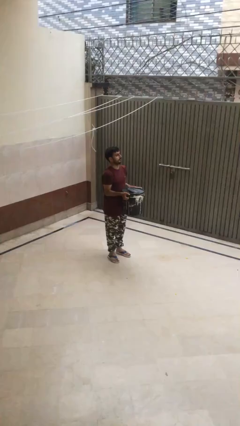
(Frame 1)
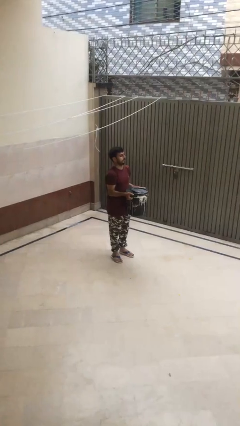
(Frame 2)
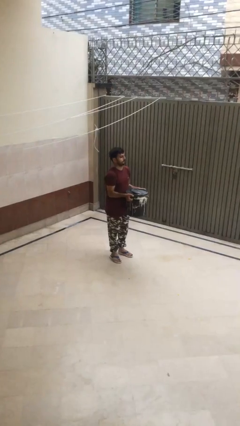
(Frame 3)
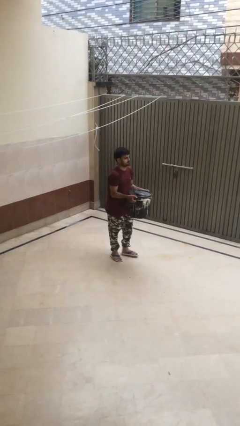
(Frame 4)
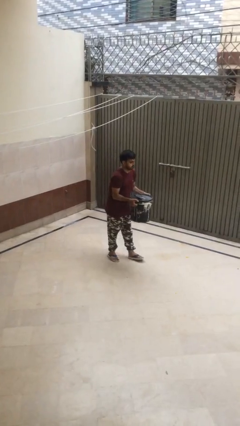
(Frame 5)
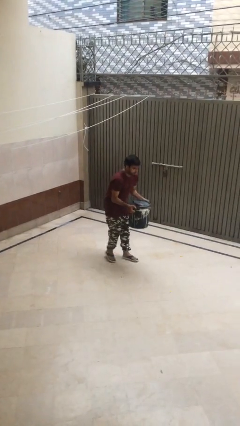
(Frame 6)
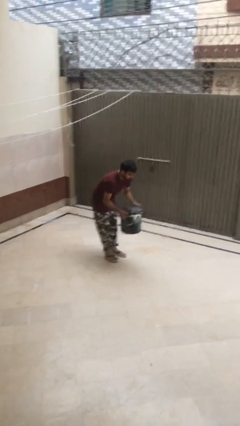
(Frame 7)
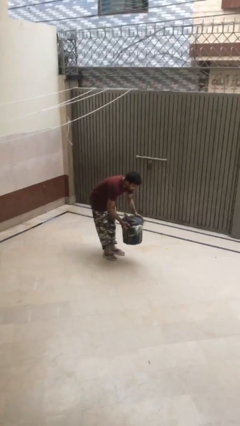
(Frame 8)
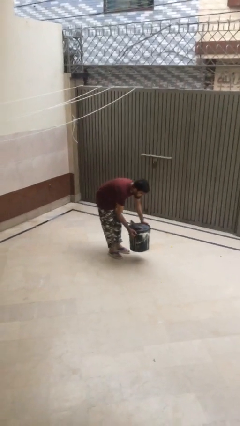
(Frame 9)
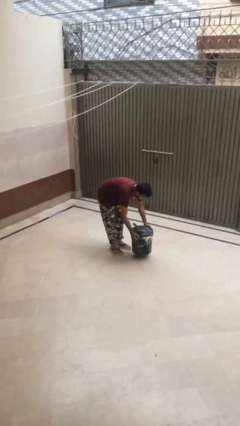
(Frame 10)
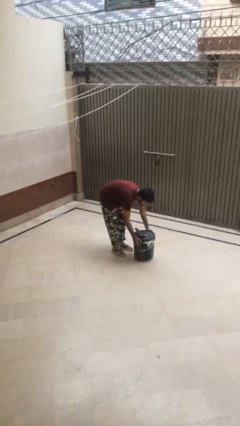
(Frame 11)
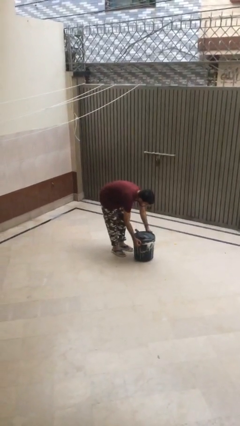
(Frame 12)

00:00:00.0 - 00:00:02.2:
person puts down object on floor

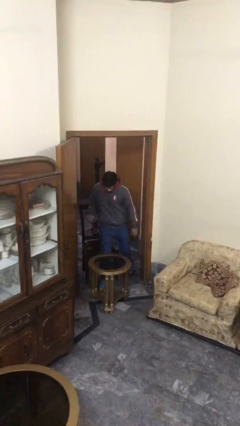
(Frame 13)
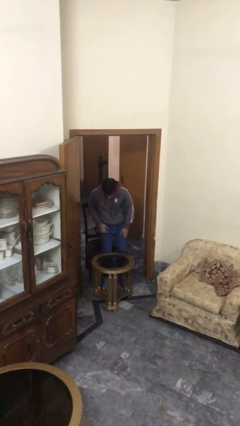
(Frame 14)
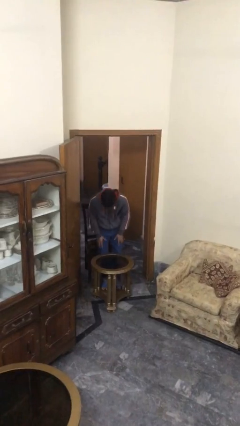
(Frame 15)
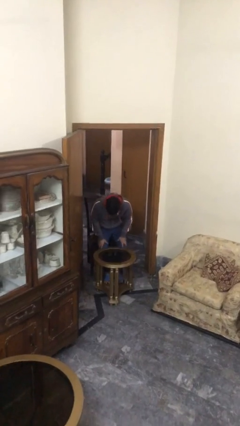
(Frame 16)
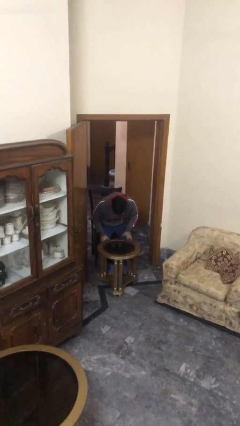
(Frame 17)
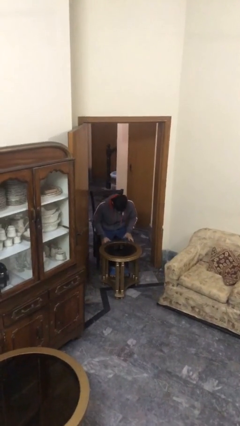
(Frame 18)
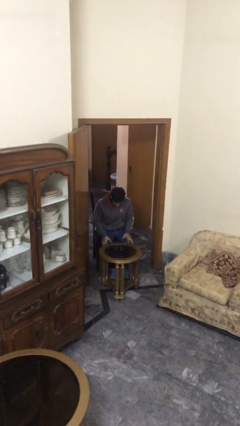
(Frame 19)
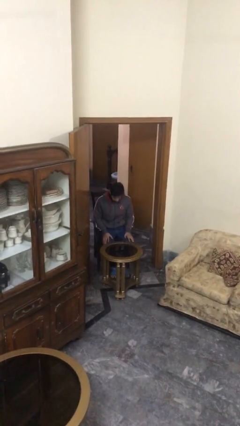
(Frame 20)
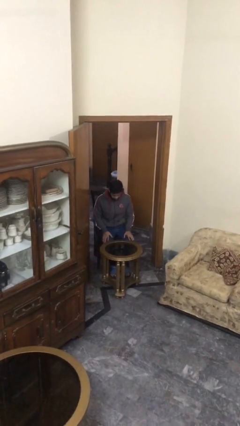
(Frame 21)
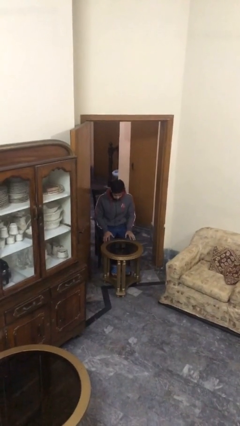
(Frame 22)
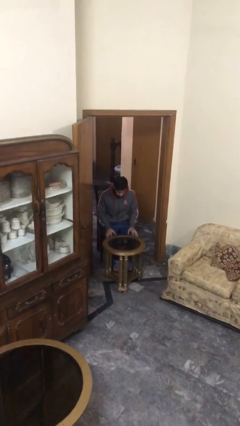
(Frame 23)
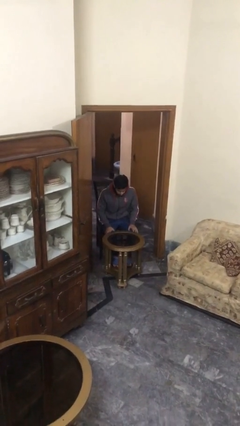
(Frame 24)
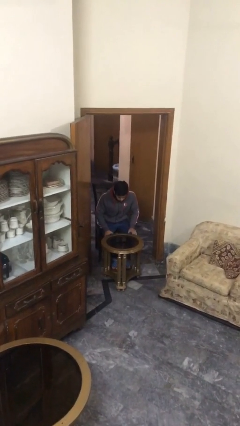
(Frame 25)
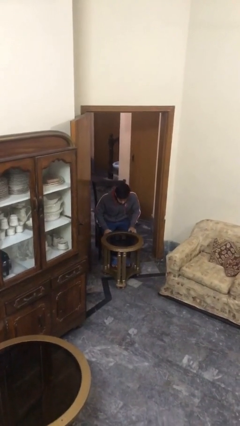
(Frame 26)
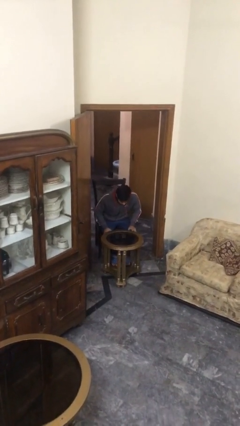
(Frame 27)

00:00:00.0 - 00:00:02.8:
person sits down

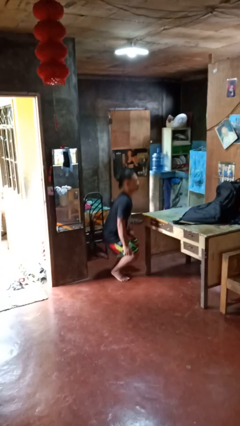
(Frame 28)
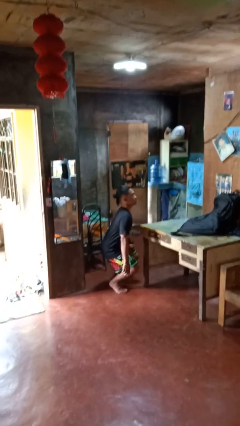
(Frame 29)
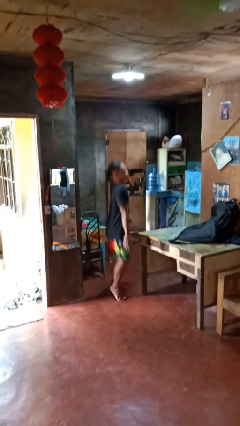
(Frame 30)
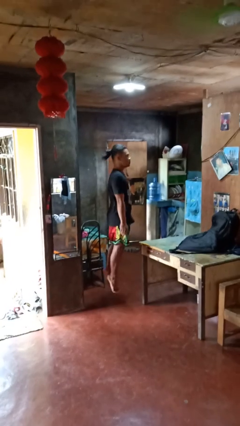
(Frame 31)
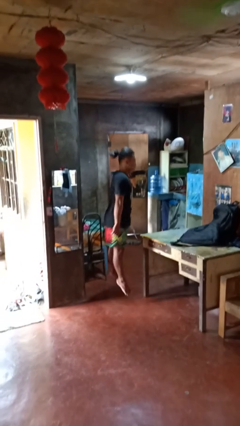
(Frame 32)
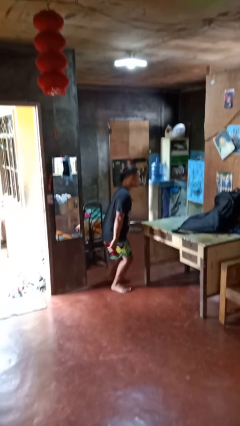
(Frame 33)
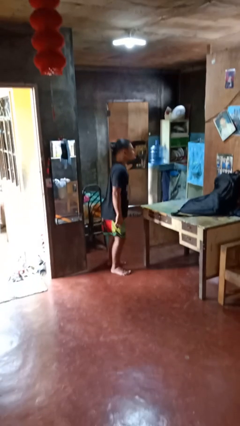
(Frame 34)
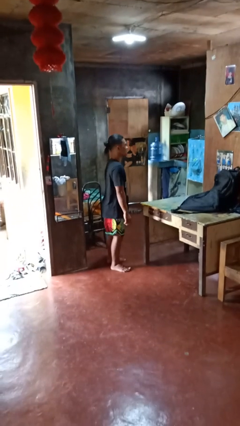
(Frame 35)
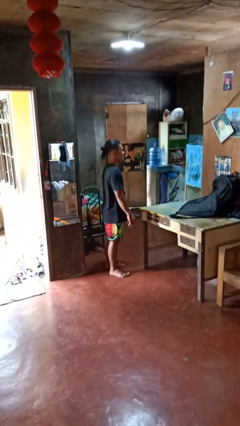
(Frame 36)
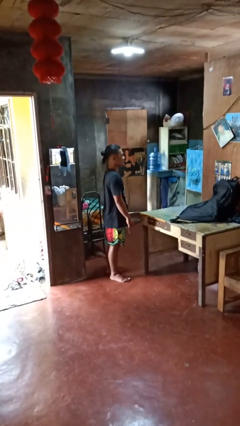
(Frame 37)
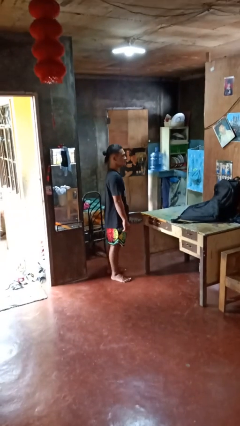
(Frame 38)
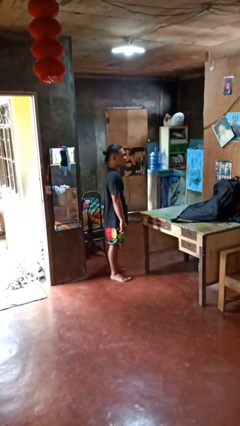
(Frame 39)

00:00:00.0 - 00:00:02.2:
person jumps

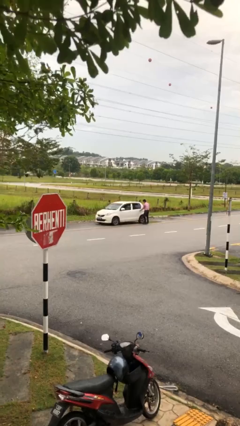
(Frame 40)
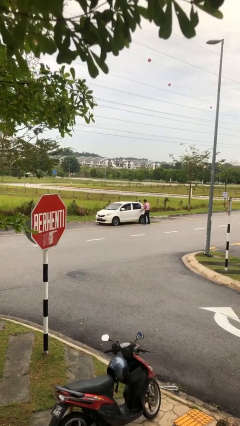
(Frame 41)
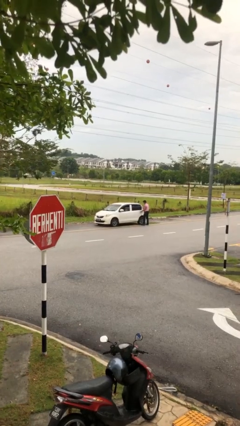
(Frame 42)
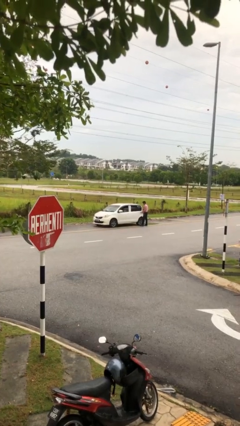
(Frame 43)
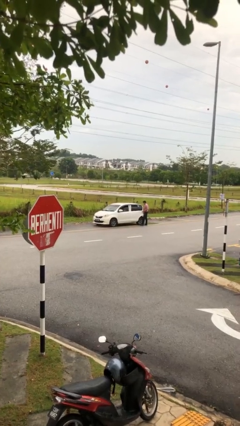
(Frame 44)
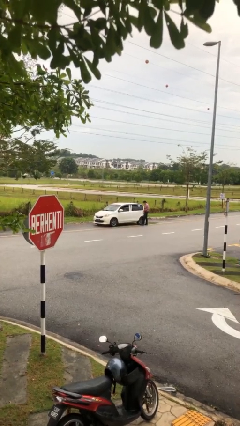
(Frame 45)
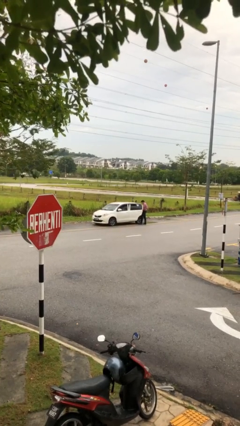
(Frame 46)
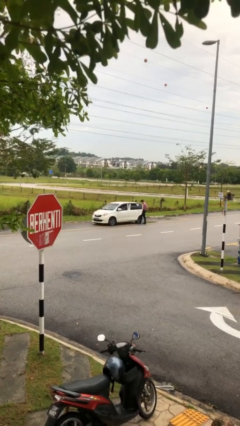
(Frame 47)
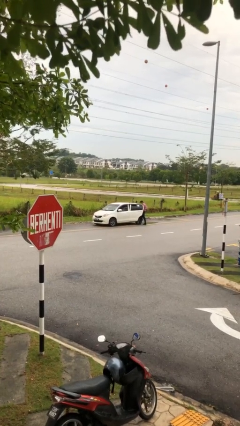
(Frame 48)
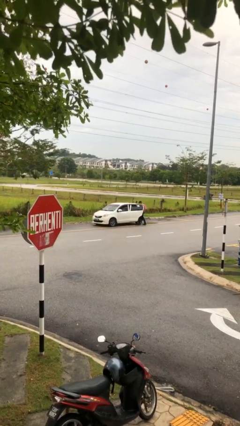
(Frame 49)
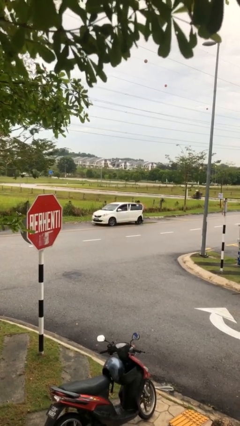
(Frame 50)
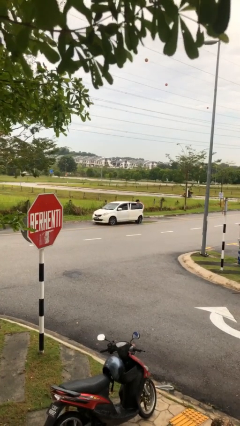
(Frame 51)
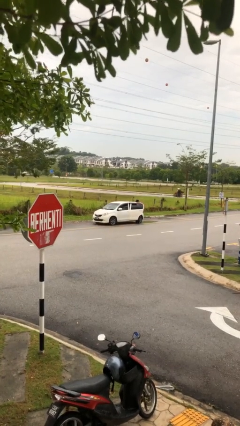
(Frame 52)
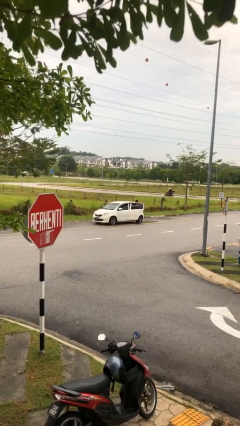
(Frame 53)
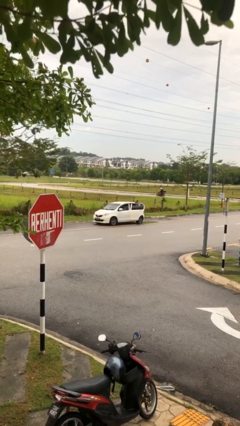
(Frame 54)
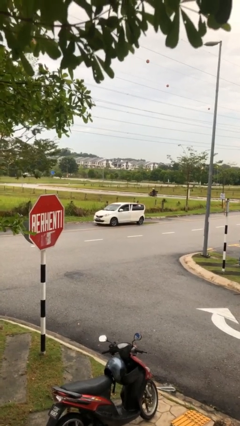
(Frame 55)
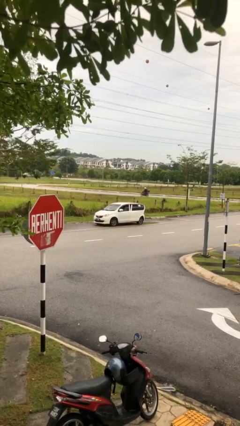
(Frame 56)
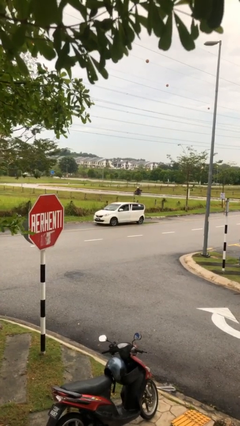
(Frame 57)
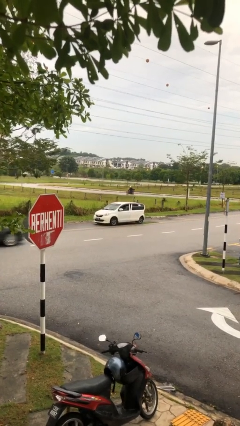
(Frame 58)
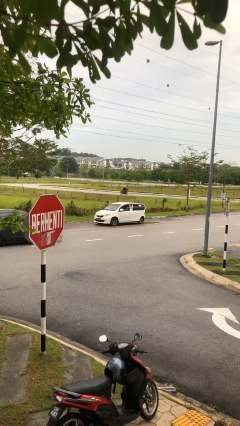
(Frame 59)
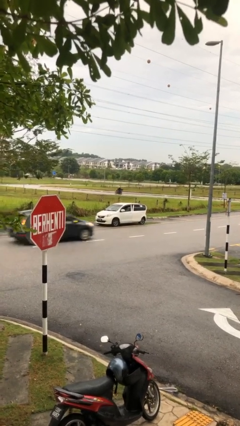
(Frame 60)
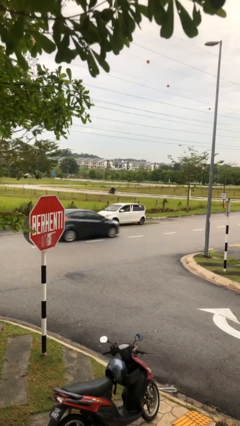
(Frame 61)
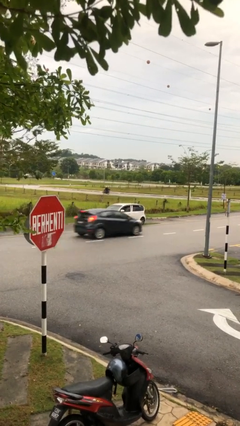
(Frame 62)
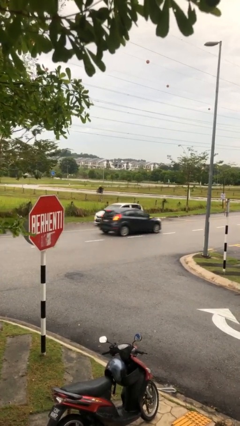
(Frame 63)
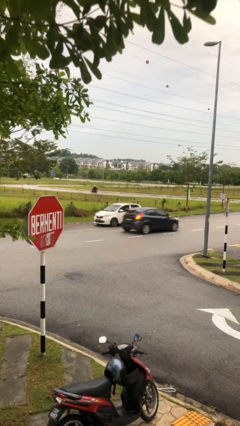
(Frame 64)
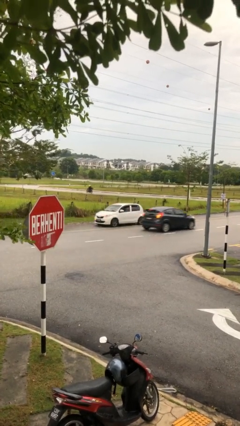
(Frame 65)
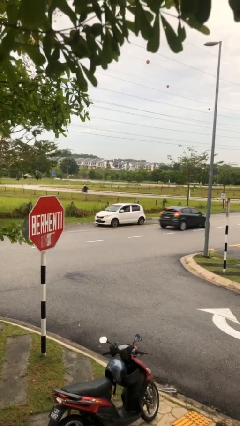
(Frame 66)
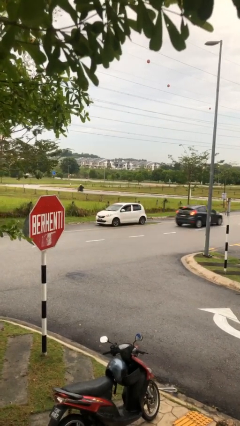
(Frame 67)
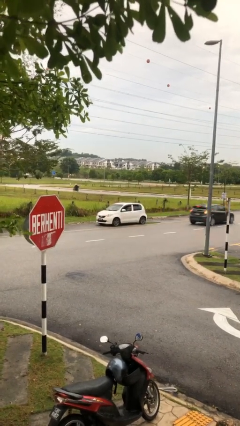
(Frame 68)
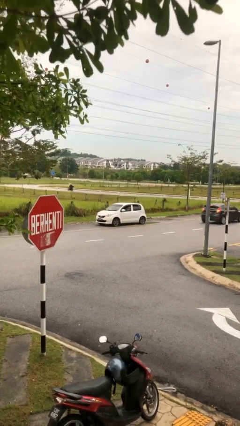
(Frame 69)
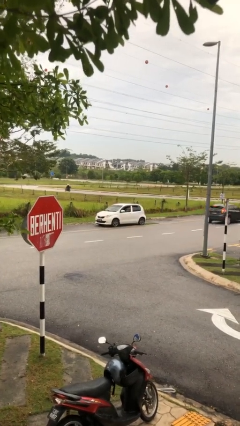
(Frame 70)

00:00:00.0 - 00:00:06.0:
car picks up person

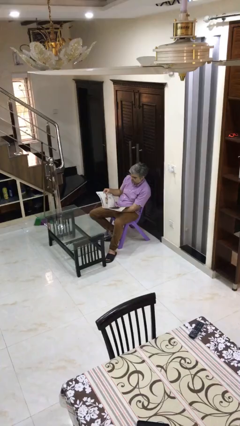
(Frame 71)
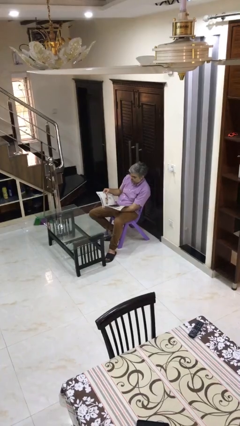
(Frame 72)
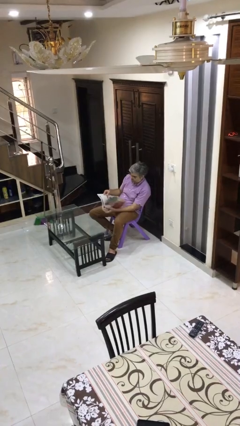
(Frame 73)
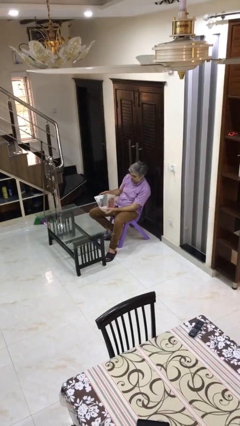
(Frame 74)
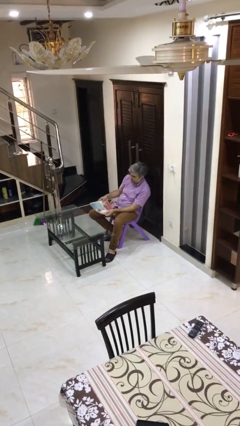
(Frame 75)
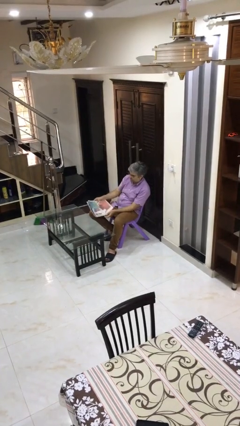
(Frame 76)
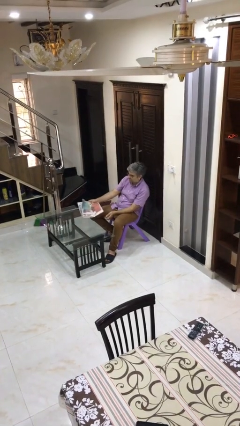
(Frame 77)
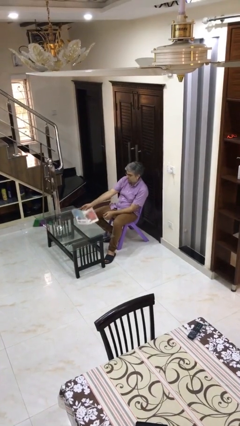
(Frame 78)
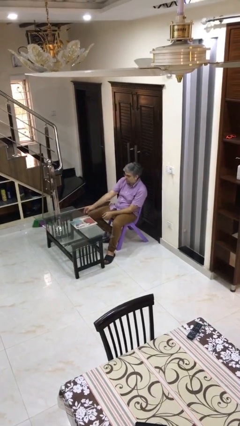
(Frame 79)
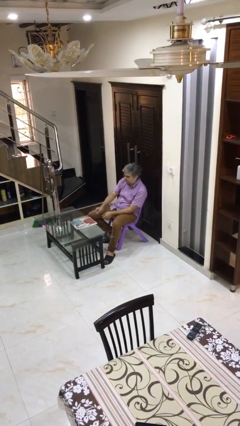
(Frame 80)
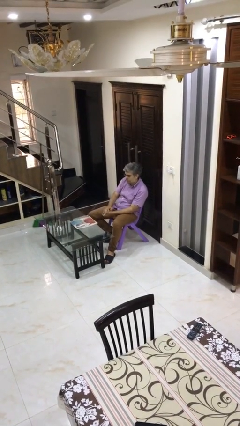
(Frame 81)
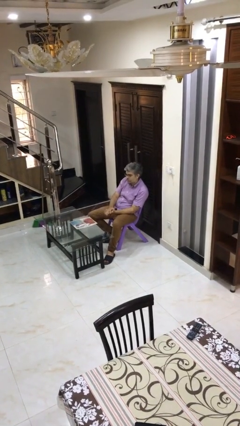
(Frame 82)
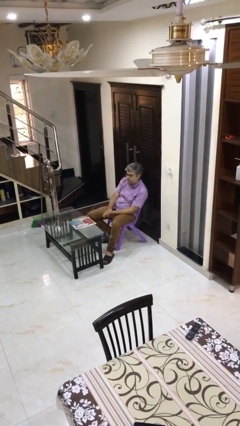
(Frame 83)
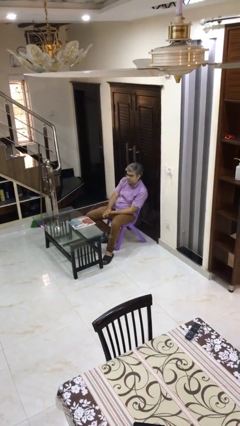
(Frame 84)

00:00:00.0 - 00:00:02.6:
person puts down object on table

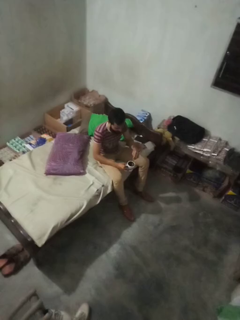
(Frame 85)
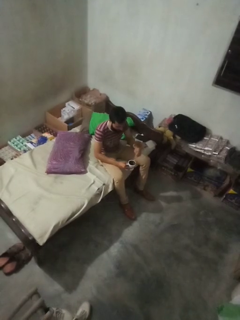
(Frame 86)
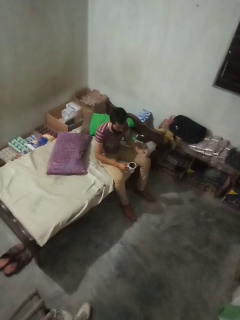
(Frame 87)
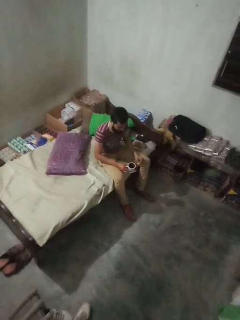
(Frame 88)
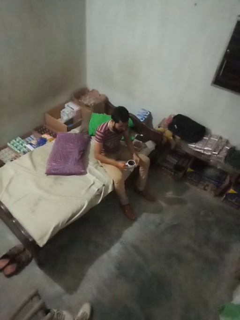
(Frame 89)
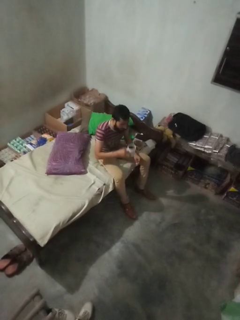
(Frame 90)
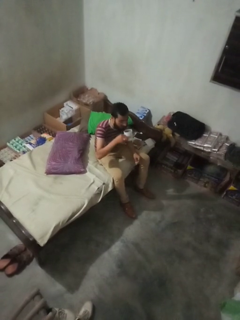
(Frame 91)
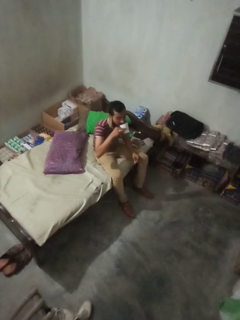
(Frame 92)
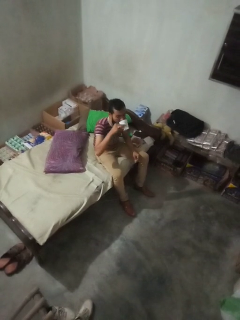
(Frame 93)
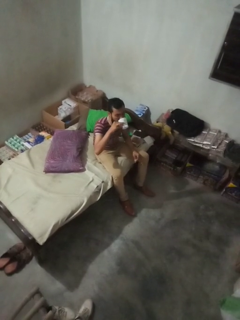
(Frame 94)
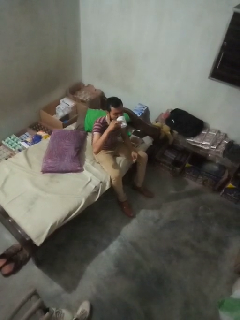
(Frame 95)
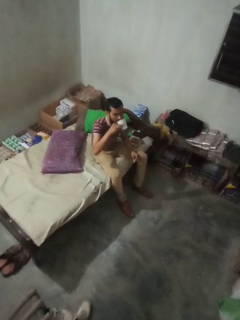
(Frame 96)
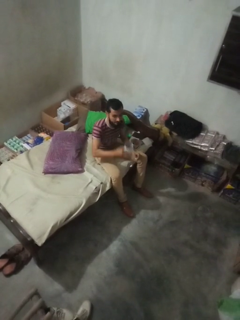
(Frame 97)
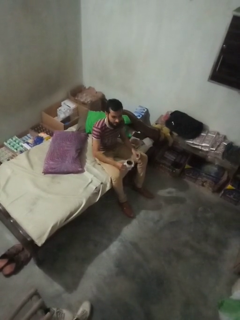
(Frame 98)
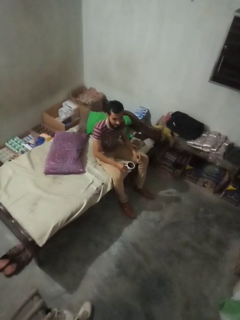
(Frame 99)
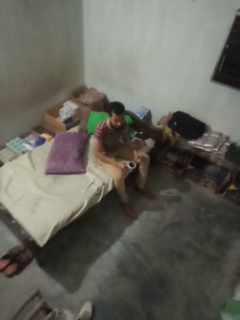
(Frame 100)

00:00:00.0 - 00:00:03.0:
person drinks from mug
